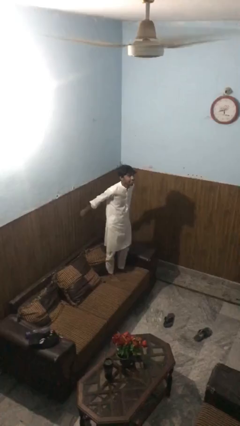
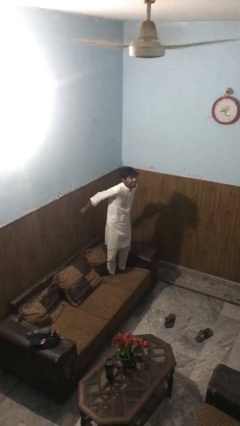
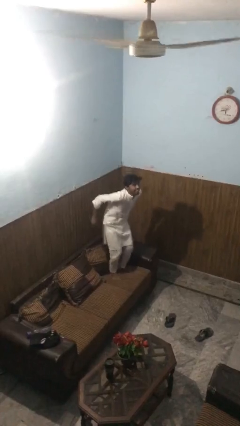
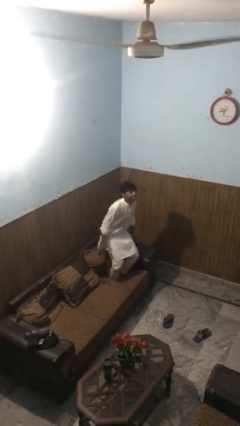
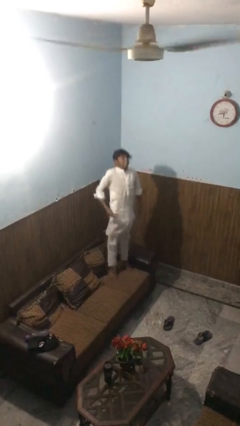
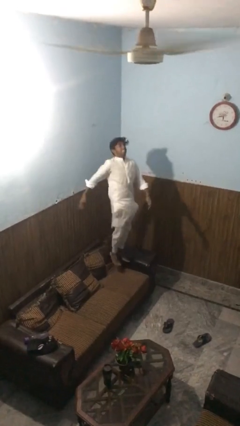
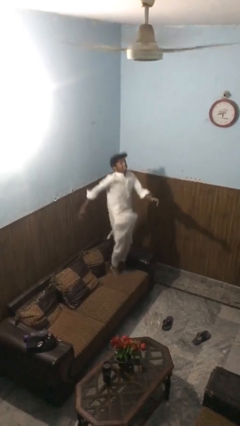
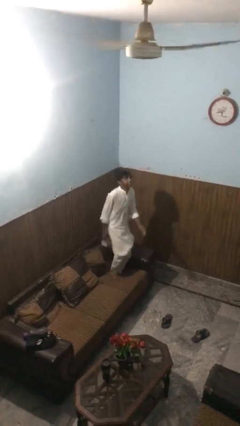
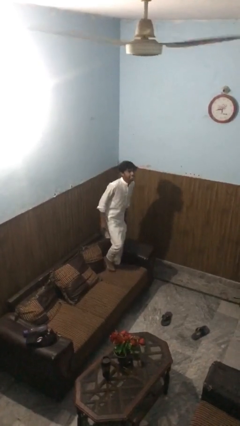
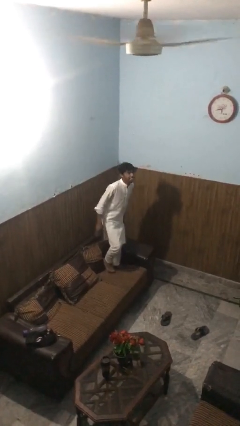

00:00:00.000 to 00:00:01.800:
person jumps on couch

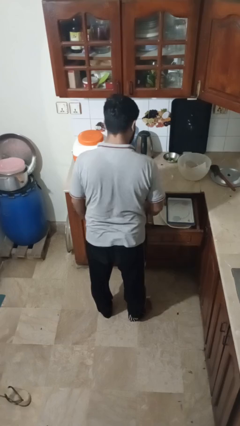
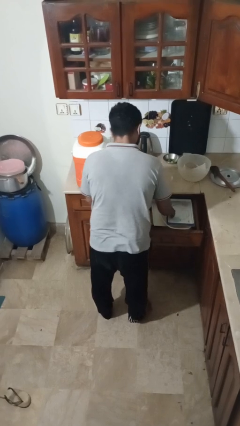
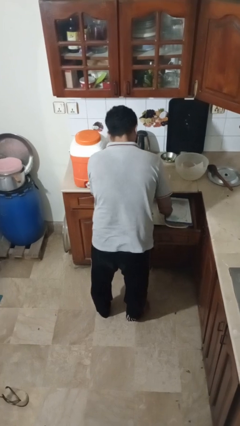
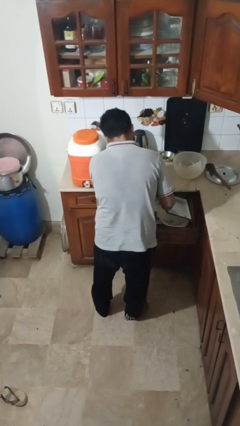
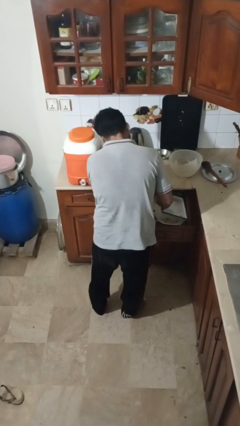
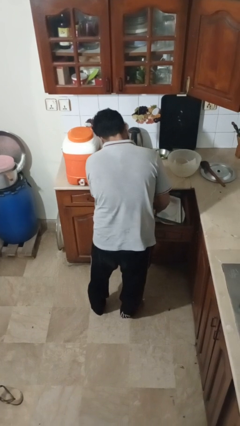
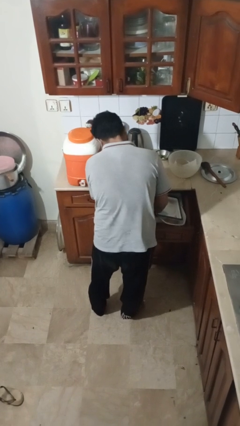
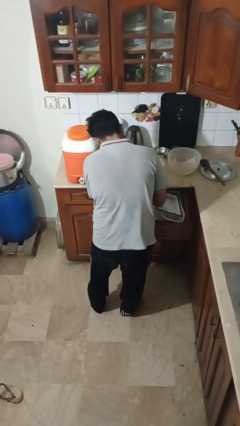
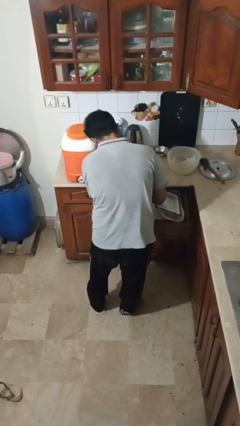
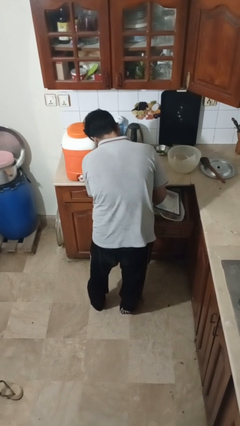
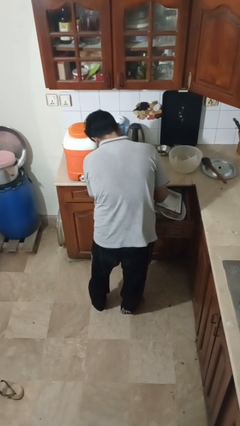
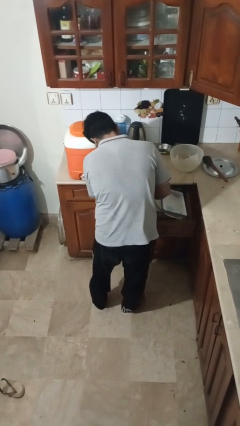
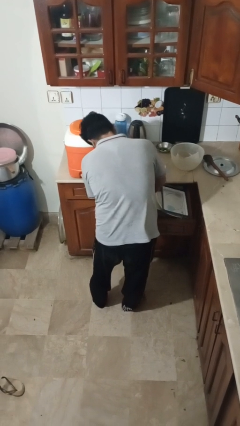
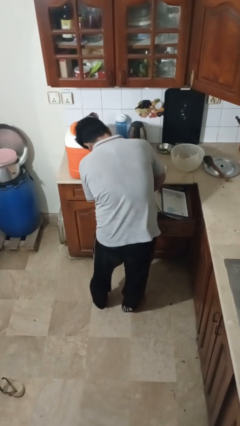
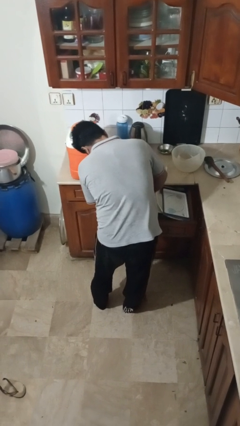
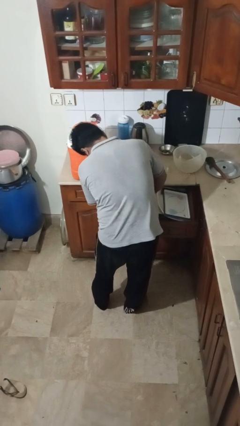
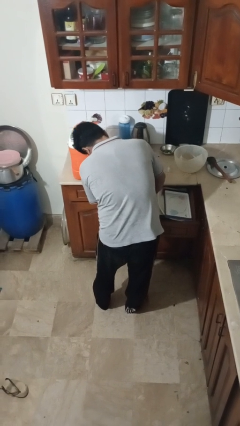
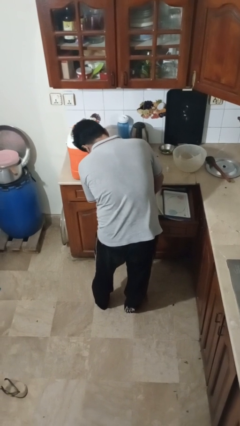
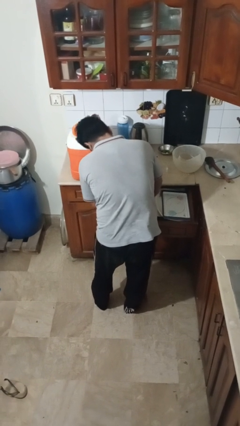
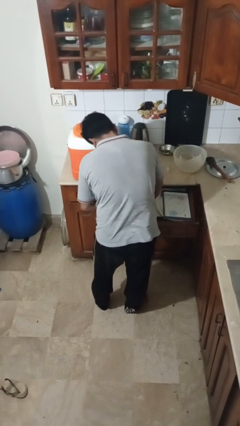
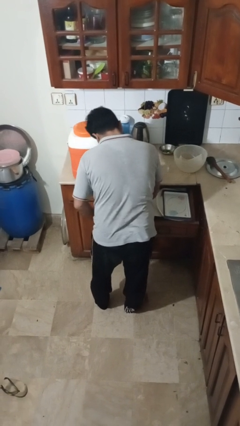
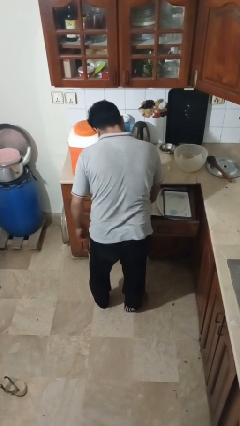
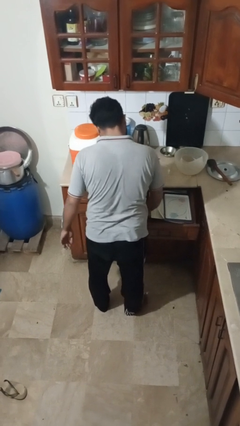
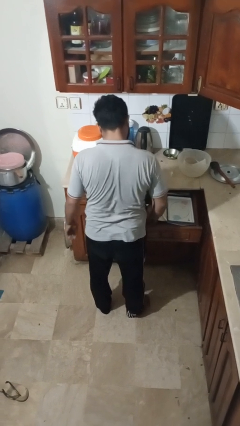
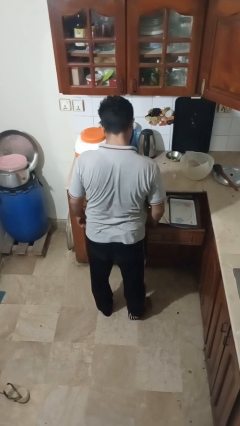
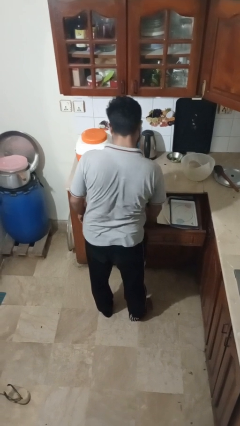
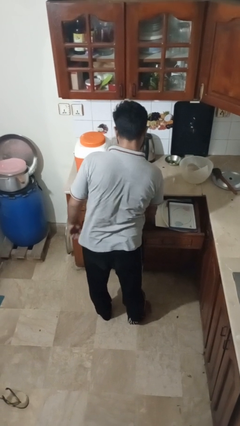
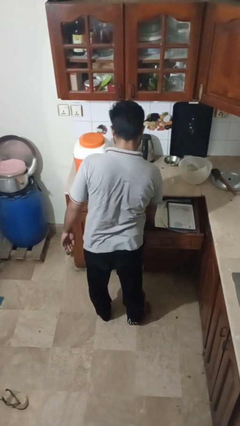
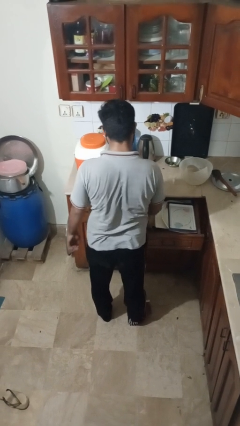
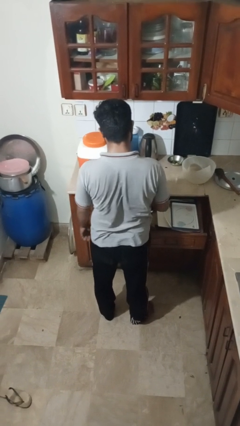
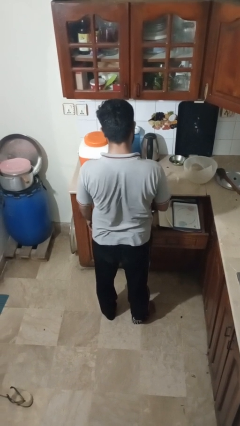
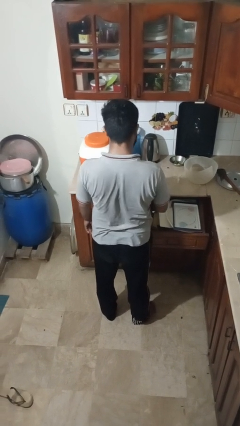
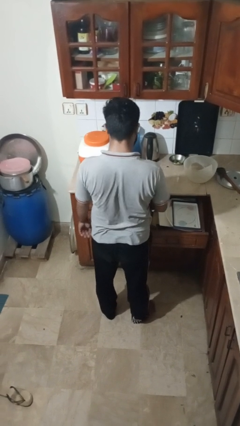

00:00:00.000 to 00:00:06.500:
person searches in kitchen drawer

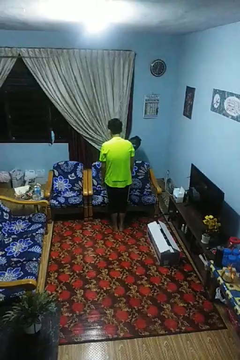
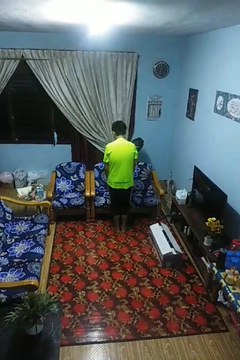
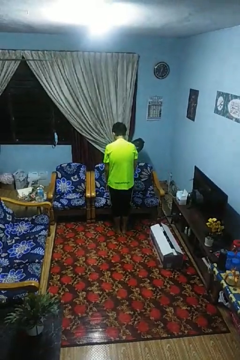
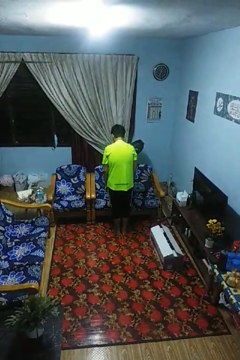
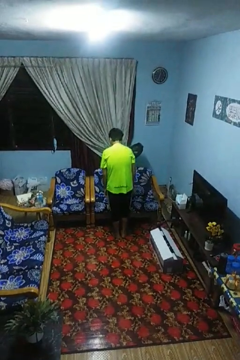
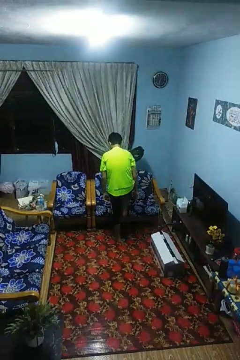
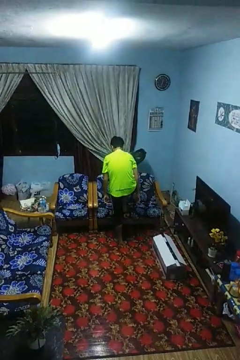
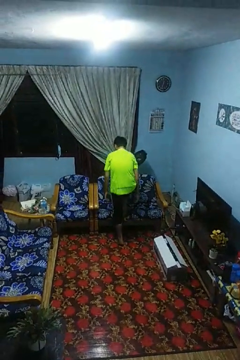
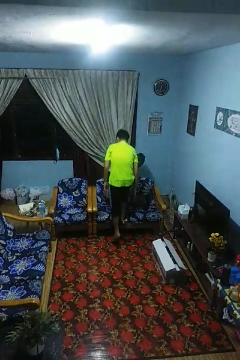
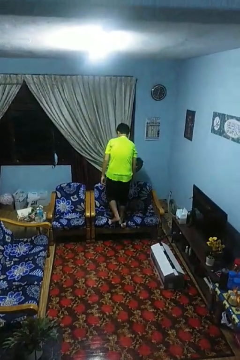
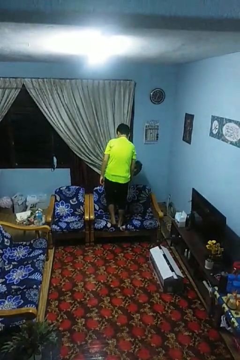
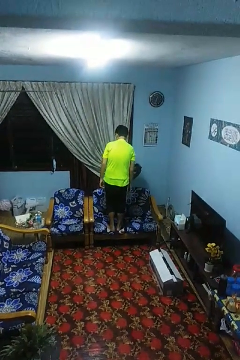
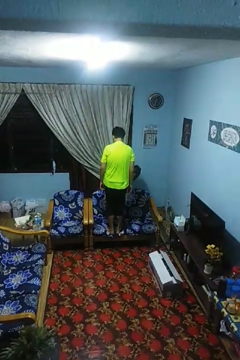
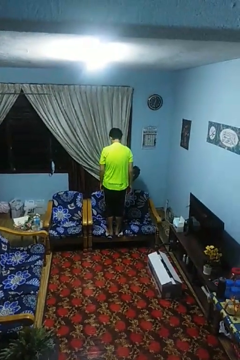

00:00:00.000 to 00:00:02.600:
person climbs on couch

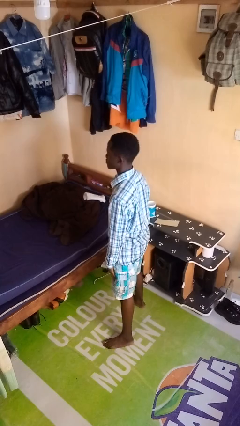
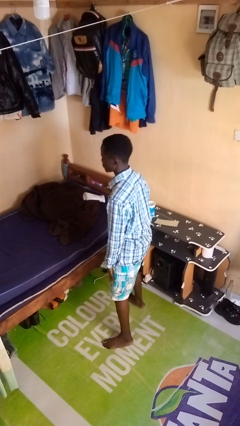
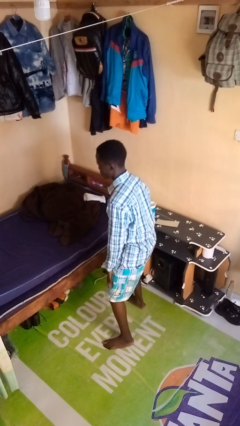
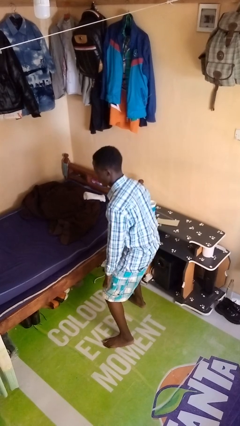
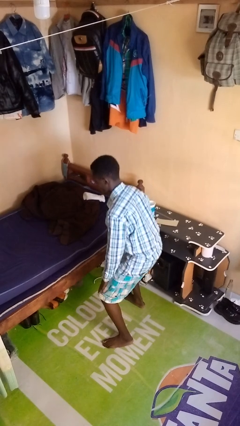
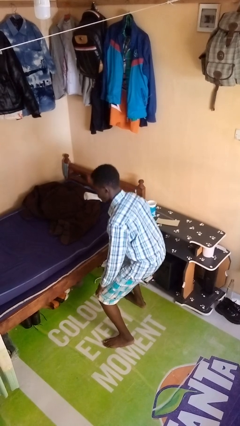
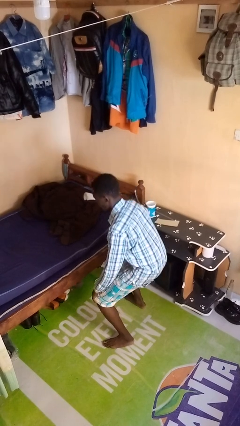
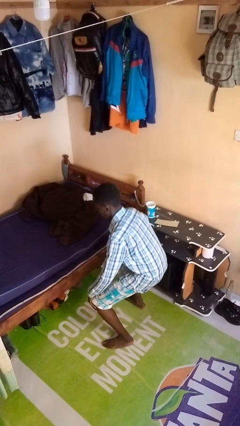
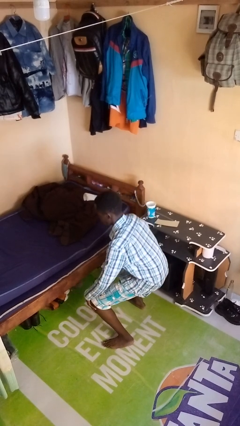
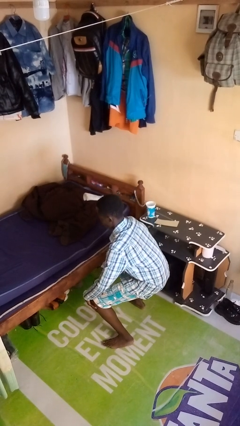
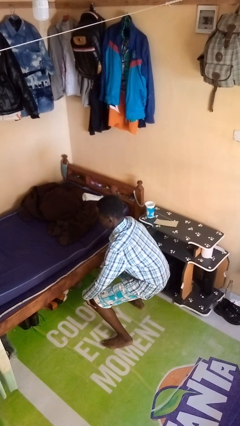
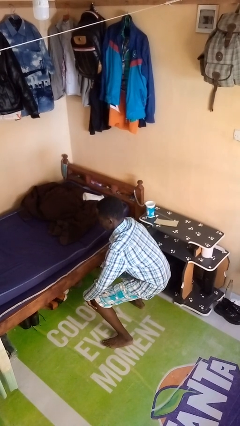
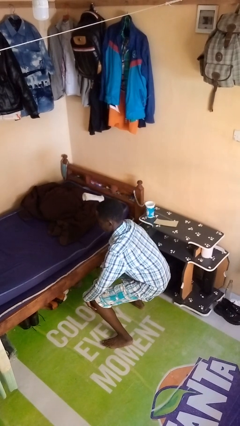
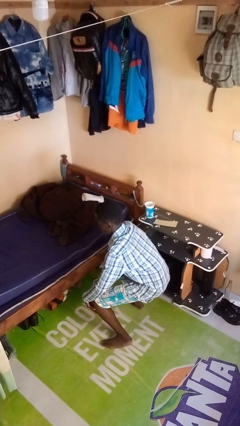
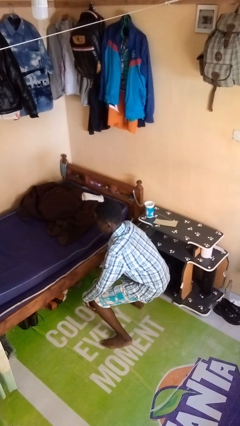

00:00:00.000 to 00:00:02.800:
person squats

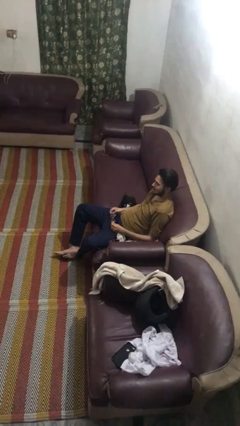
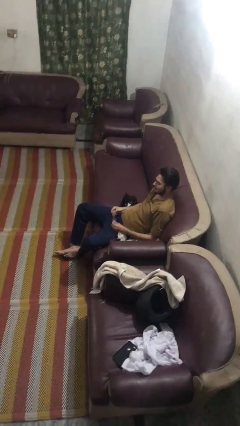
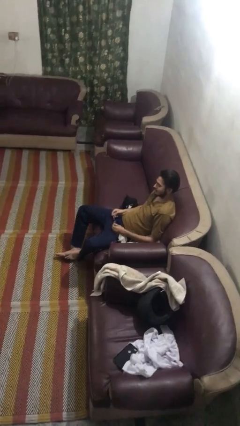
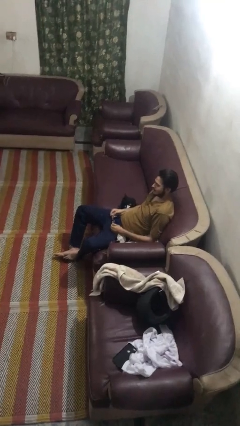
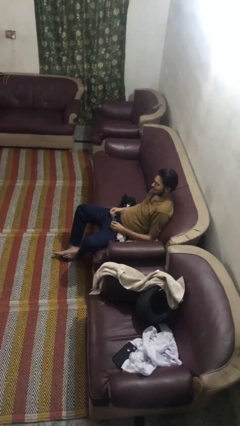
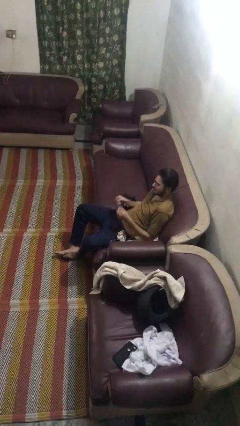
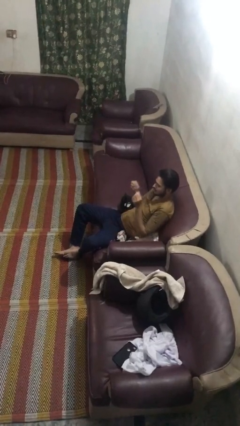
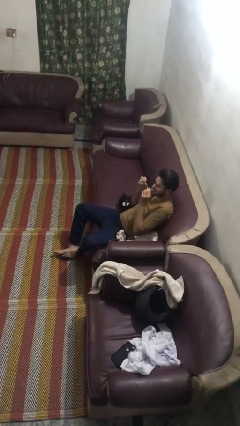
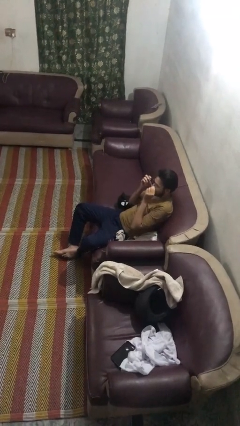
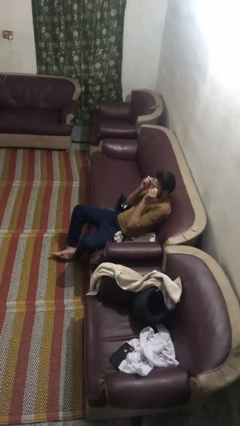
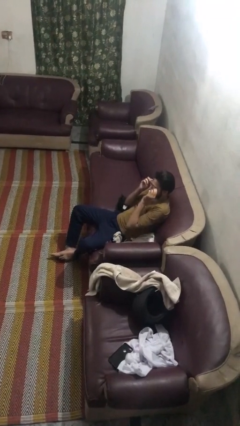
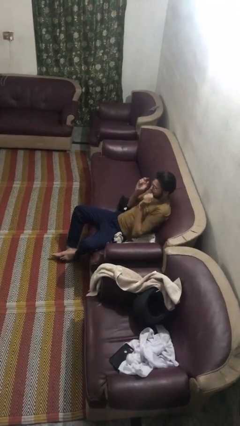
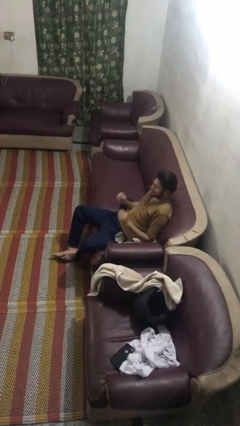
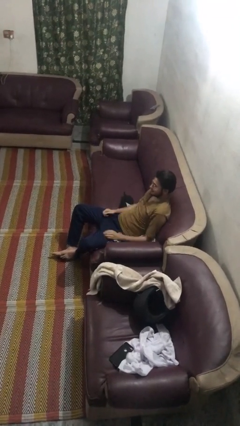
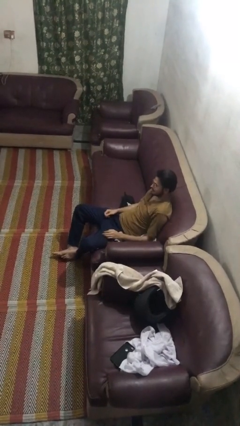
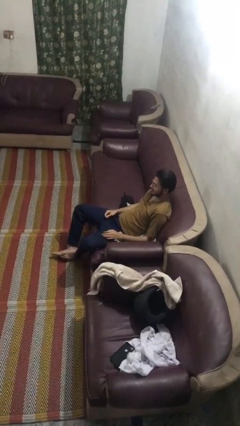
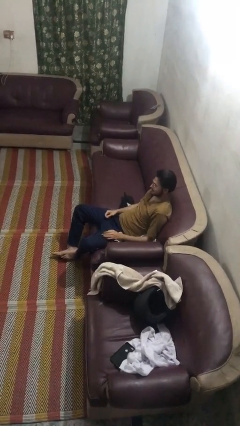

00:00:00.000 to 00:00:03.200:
person puts on glasses

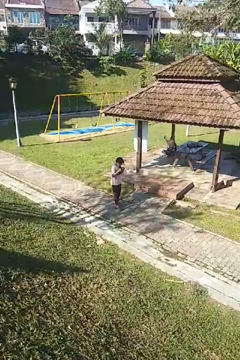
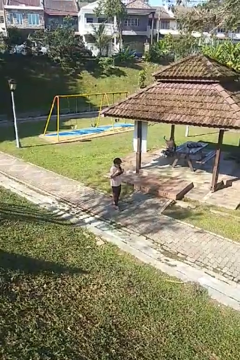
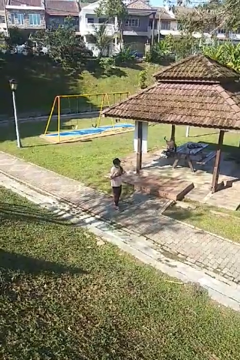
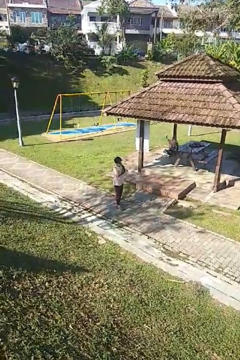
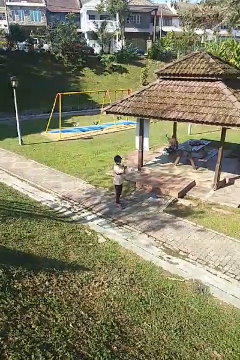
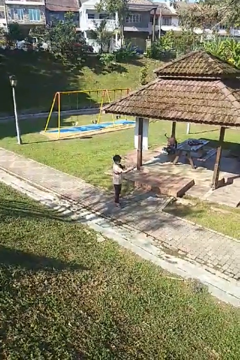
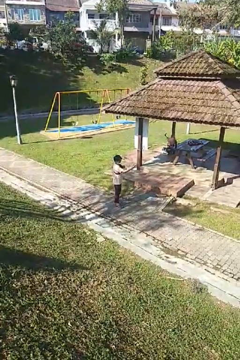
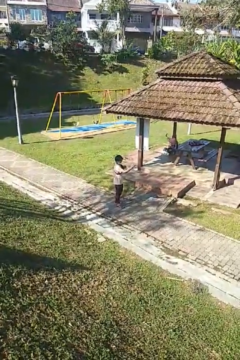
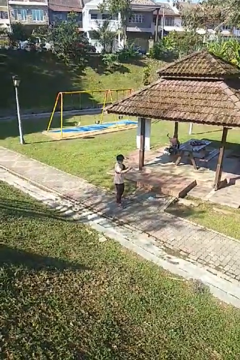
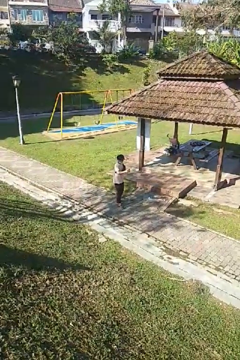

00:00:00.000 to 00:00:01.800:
person karate chop
